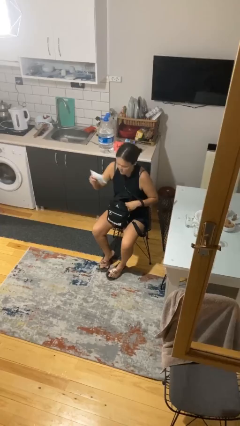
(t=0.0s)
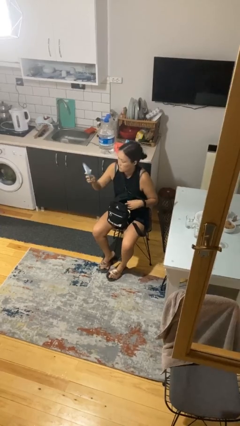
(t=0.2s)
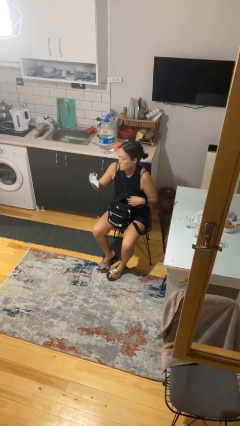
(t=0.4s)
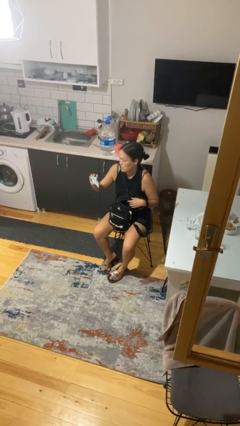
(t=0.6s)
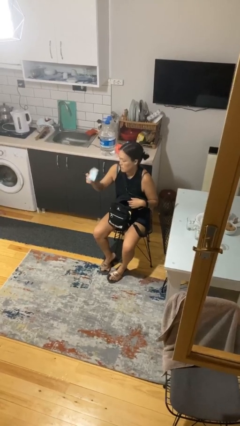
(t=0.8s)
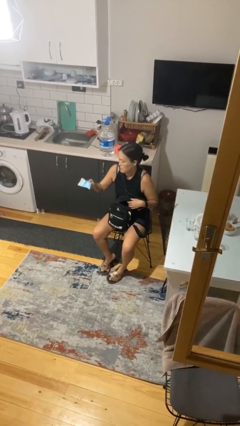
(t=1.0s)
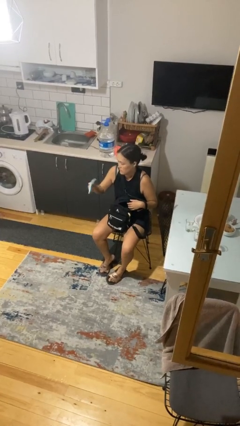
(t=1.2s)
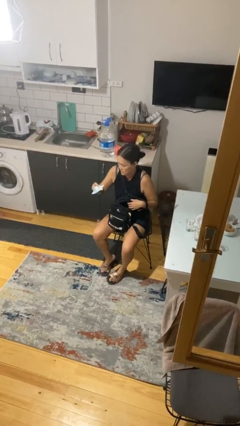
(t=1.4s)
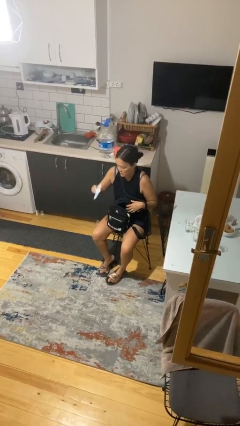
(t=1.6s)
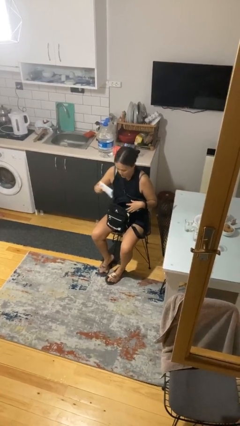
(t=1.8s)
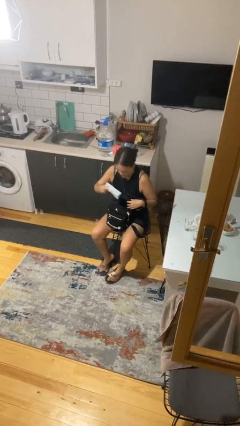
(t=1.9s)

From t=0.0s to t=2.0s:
person takes object from backpack

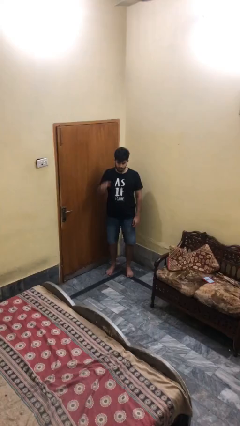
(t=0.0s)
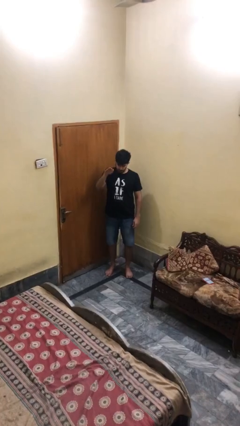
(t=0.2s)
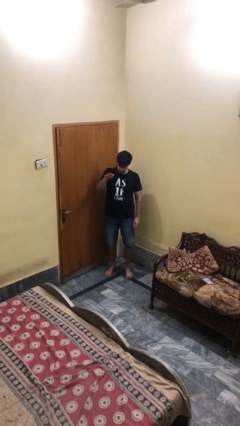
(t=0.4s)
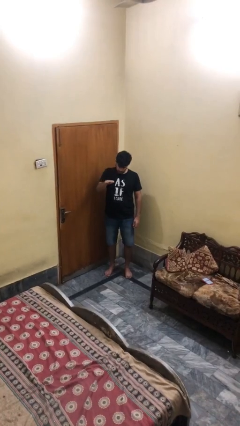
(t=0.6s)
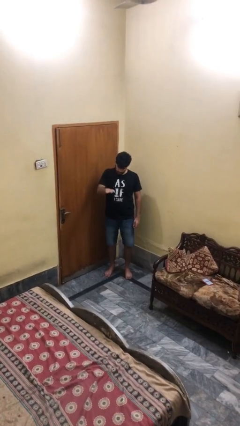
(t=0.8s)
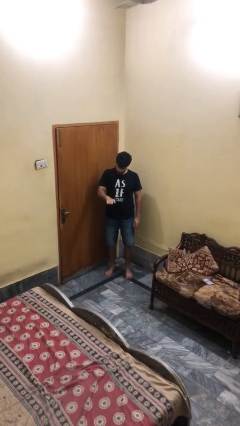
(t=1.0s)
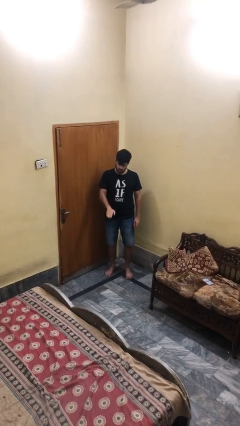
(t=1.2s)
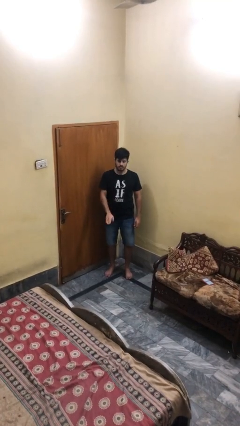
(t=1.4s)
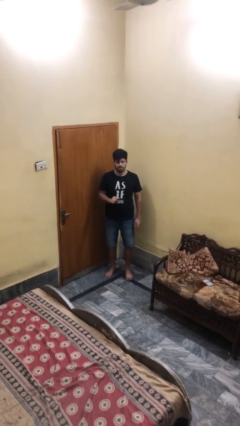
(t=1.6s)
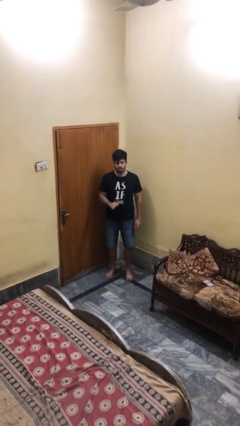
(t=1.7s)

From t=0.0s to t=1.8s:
person gestures swipe down

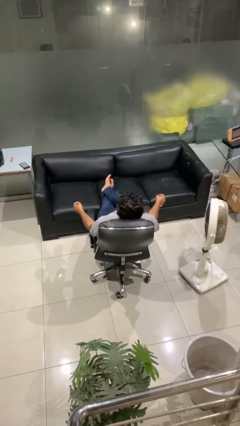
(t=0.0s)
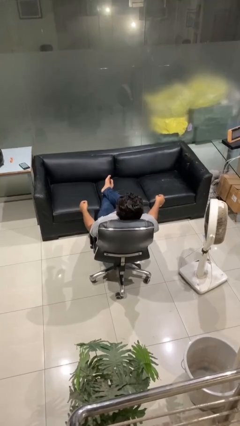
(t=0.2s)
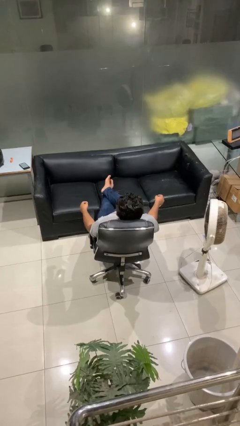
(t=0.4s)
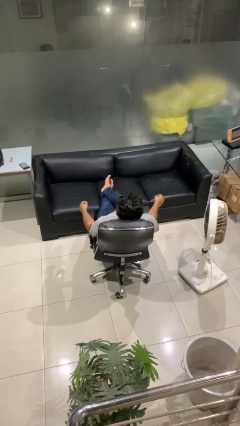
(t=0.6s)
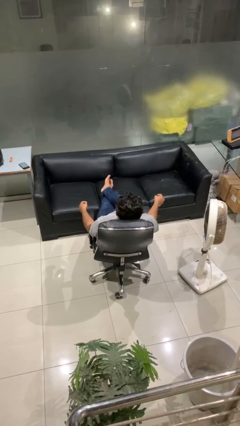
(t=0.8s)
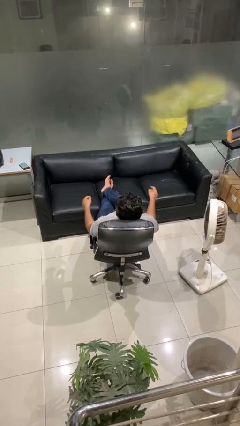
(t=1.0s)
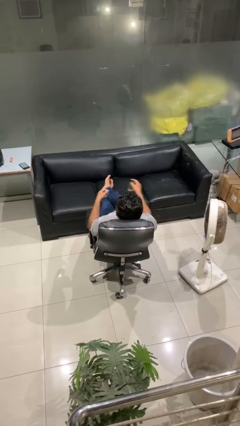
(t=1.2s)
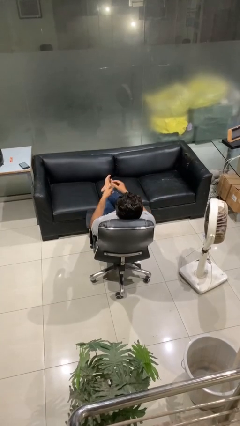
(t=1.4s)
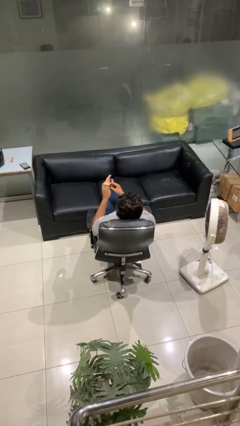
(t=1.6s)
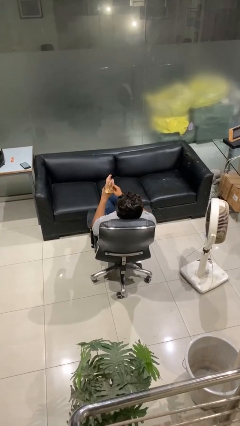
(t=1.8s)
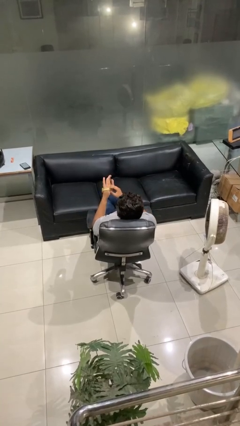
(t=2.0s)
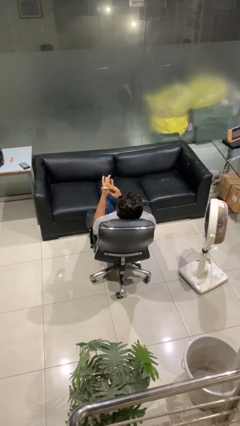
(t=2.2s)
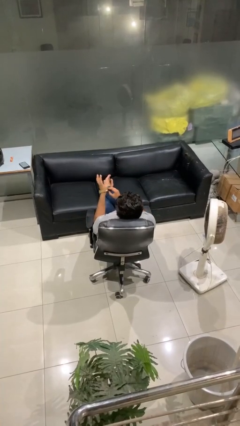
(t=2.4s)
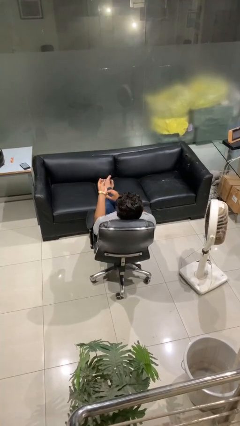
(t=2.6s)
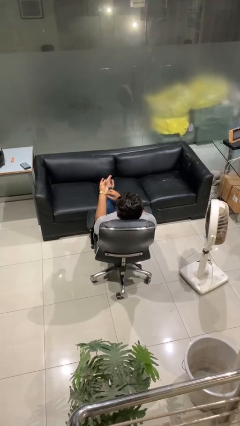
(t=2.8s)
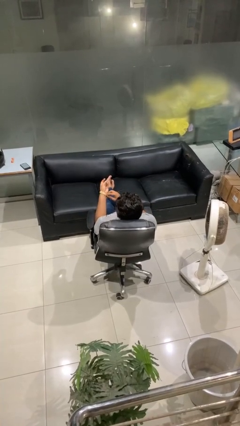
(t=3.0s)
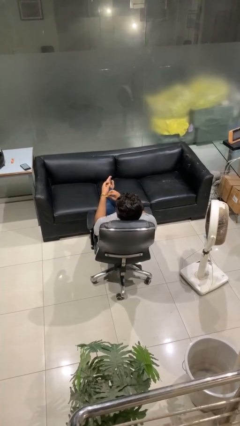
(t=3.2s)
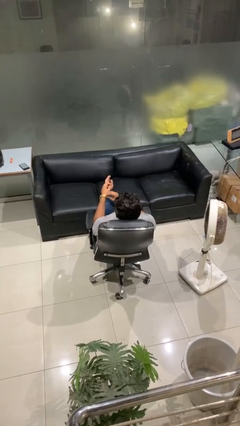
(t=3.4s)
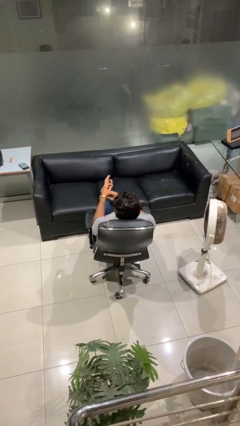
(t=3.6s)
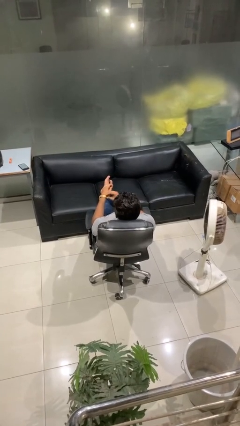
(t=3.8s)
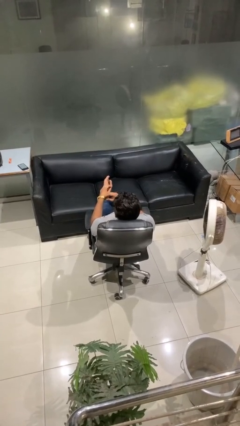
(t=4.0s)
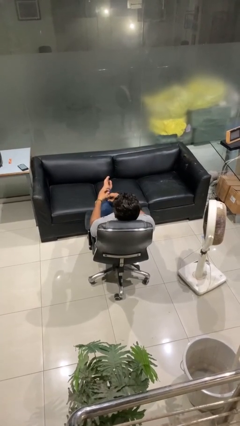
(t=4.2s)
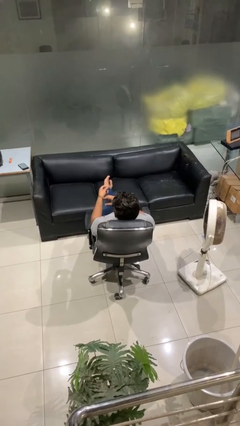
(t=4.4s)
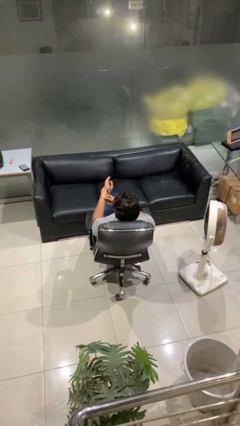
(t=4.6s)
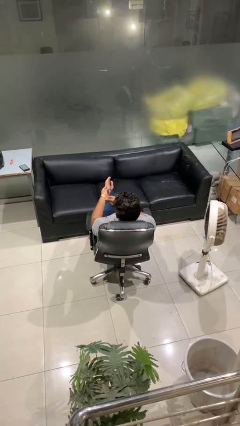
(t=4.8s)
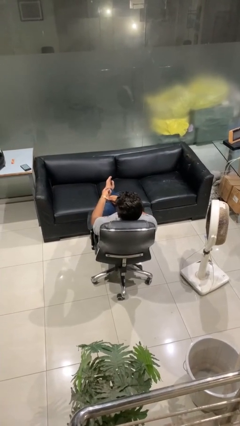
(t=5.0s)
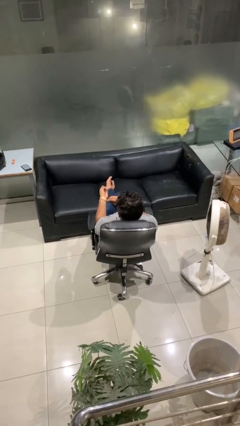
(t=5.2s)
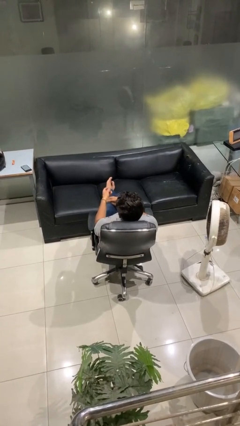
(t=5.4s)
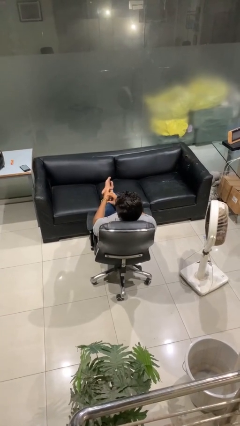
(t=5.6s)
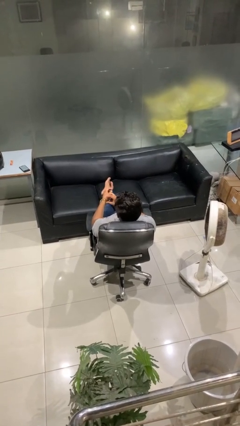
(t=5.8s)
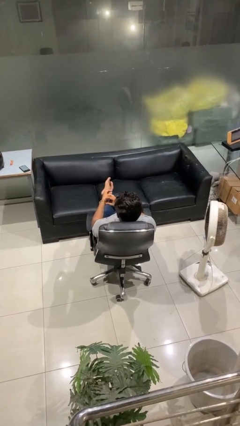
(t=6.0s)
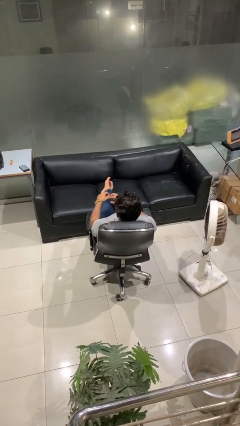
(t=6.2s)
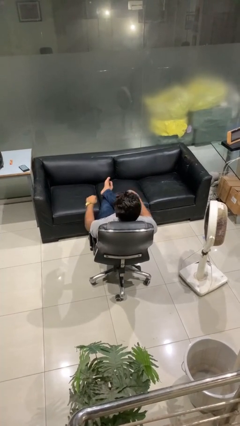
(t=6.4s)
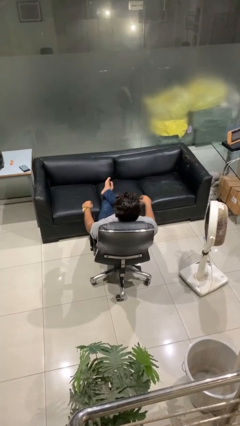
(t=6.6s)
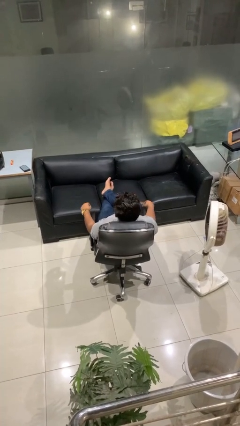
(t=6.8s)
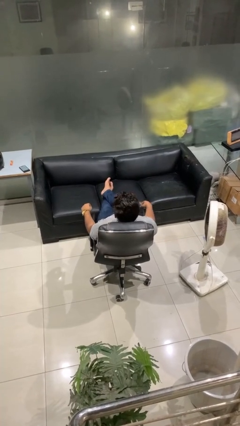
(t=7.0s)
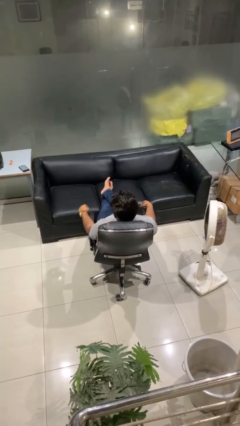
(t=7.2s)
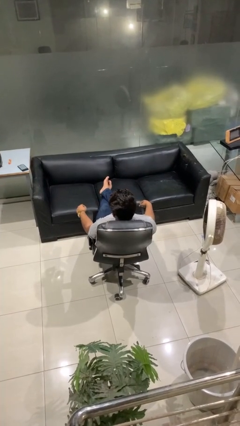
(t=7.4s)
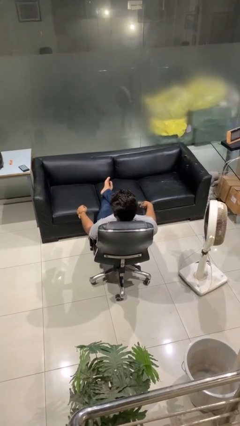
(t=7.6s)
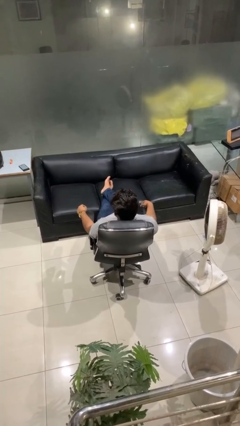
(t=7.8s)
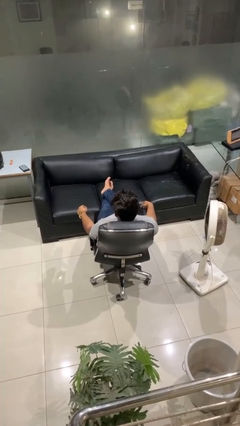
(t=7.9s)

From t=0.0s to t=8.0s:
person puts on wristwatch

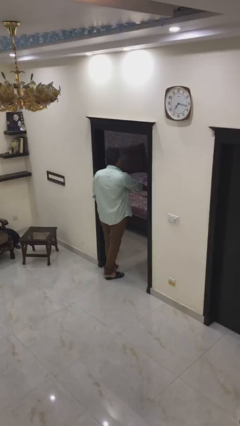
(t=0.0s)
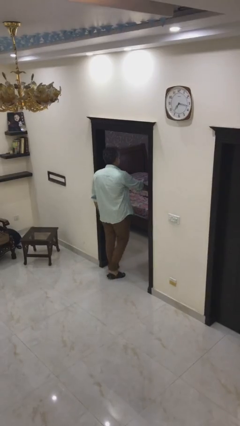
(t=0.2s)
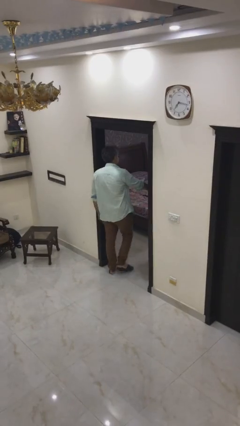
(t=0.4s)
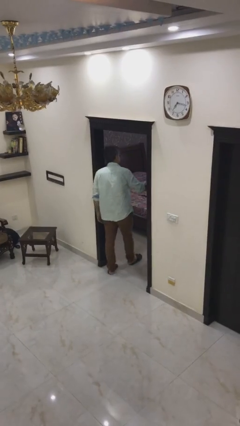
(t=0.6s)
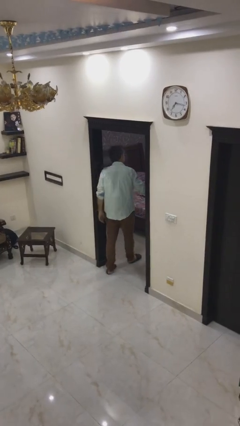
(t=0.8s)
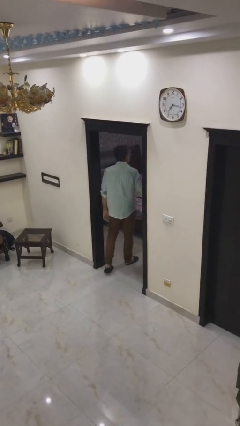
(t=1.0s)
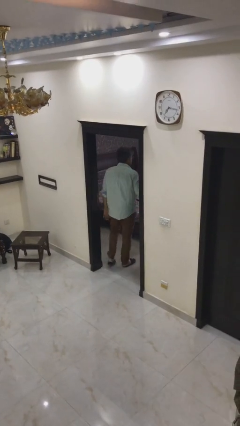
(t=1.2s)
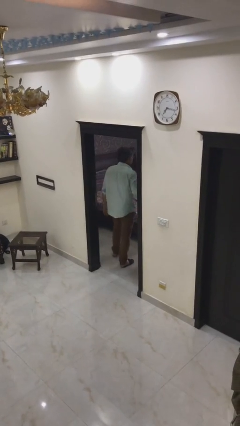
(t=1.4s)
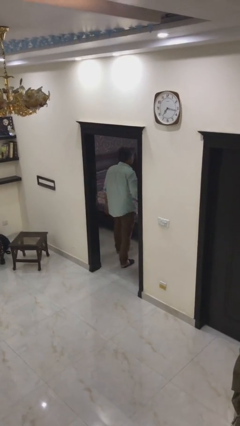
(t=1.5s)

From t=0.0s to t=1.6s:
person exits scene through structure

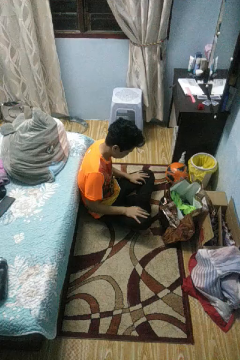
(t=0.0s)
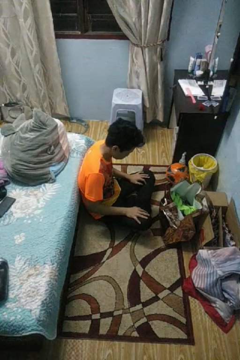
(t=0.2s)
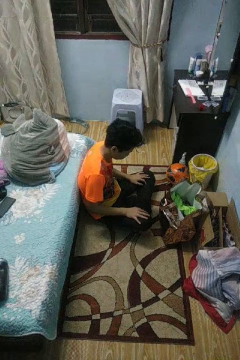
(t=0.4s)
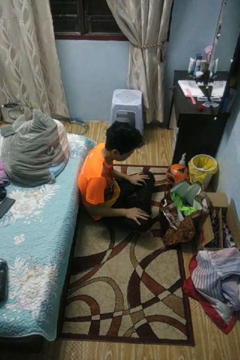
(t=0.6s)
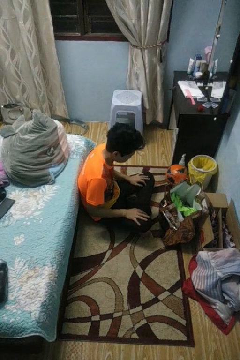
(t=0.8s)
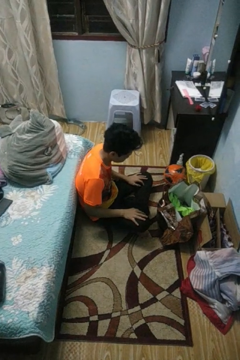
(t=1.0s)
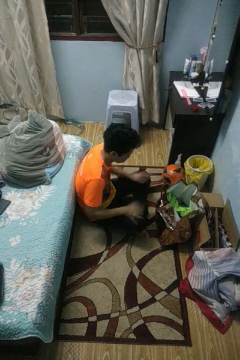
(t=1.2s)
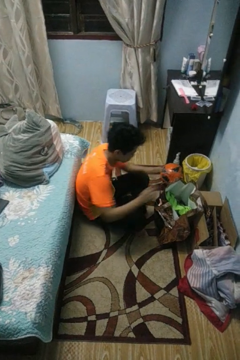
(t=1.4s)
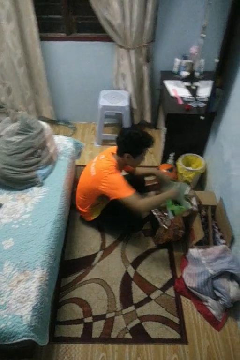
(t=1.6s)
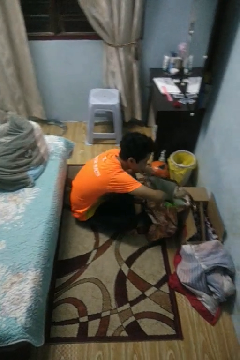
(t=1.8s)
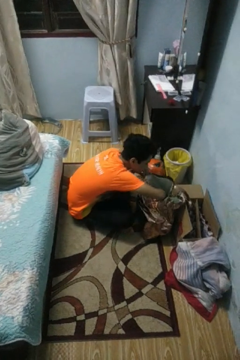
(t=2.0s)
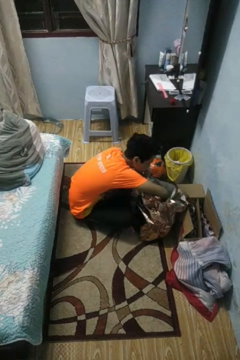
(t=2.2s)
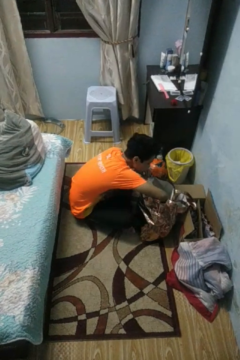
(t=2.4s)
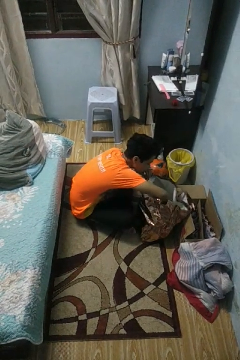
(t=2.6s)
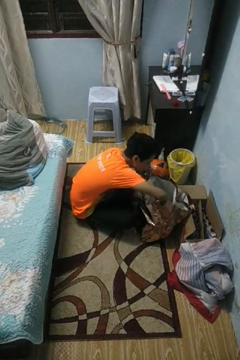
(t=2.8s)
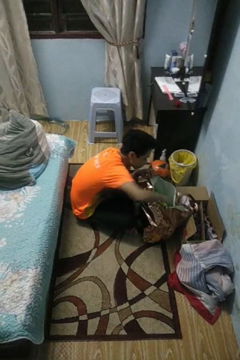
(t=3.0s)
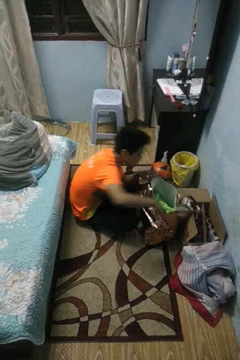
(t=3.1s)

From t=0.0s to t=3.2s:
person searches in bag

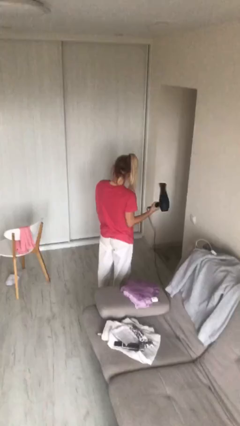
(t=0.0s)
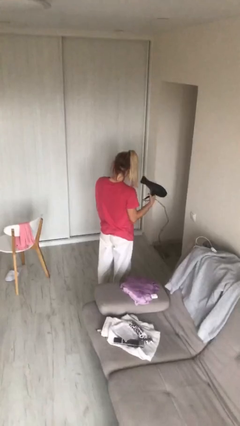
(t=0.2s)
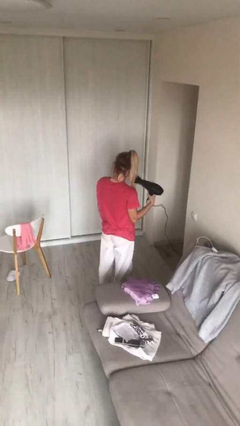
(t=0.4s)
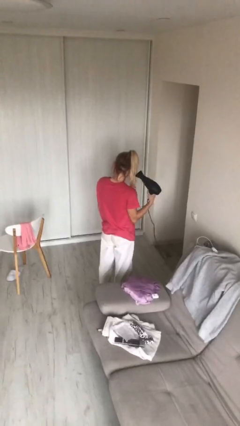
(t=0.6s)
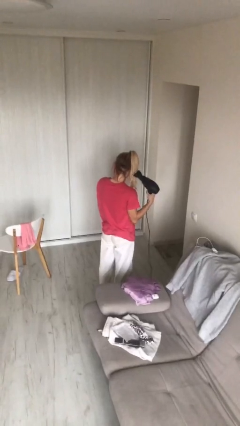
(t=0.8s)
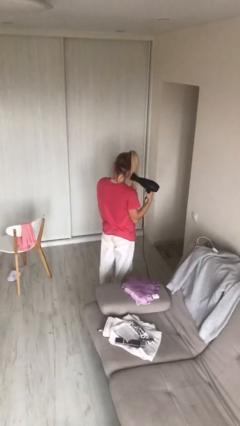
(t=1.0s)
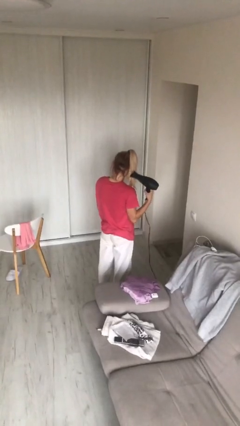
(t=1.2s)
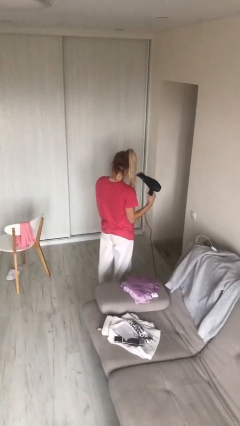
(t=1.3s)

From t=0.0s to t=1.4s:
person dries hair with hairdryer
